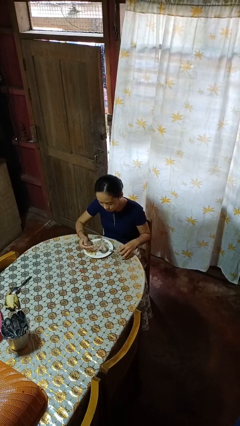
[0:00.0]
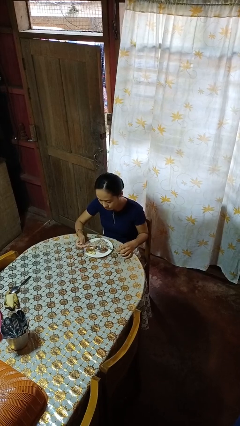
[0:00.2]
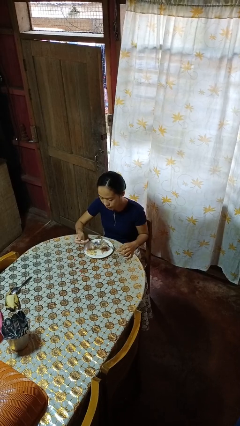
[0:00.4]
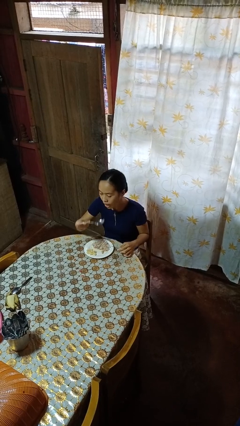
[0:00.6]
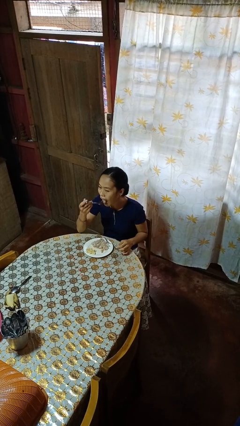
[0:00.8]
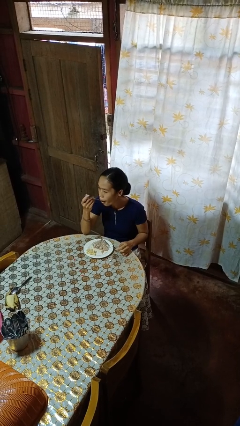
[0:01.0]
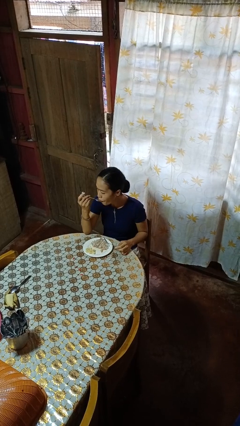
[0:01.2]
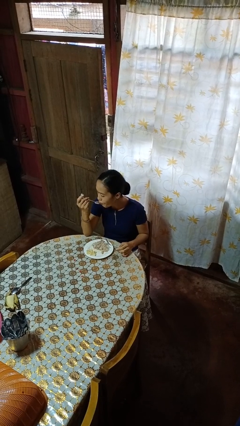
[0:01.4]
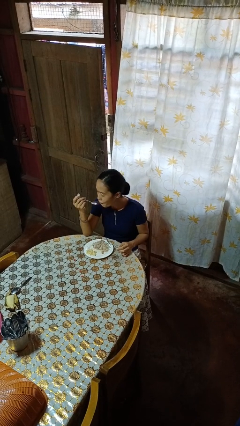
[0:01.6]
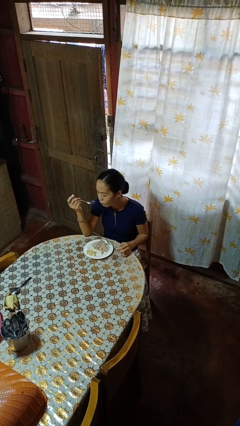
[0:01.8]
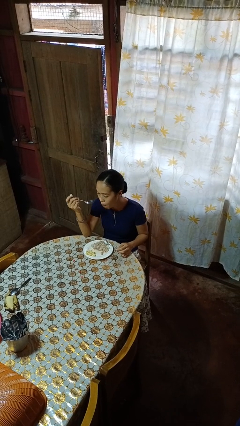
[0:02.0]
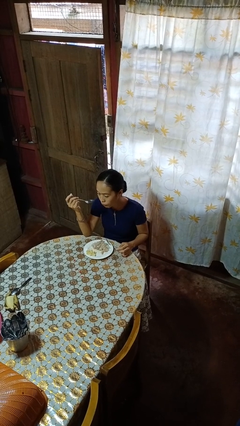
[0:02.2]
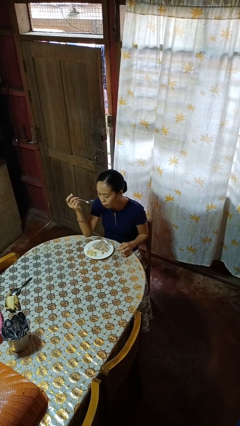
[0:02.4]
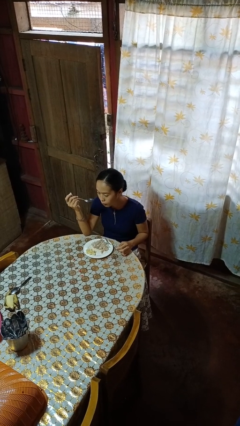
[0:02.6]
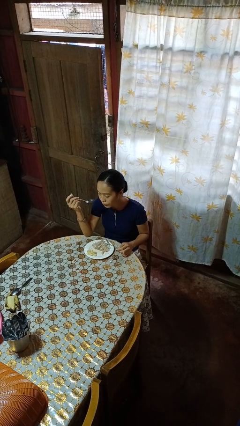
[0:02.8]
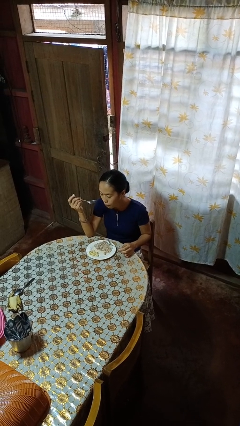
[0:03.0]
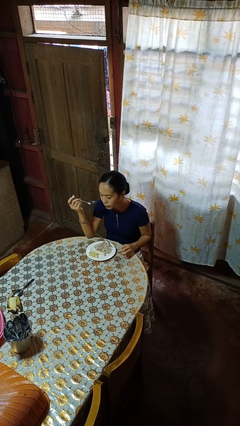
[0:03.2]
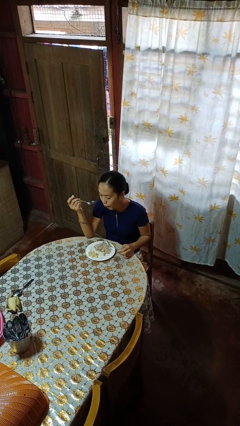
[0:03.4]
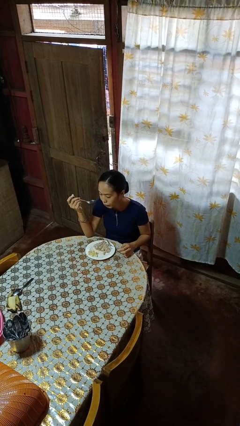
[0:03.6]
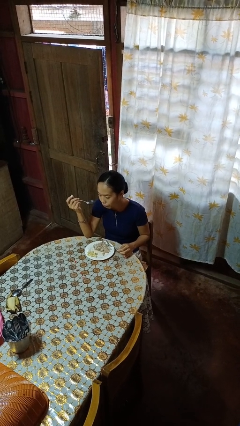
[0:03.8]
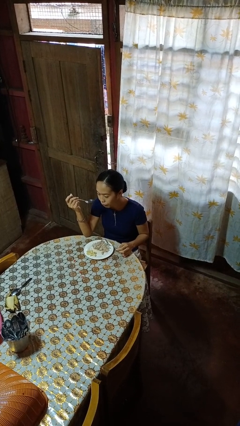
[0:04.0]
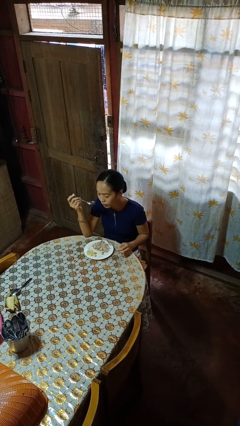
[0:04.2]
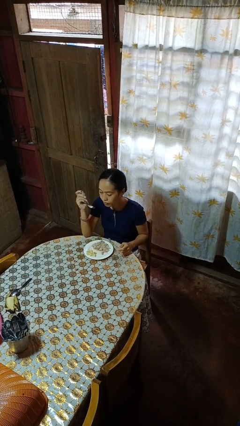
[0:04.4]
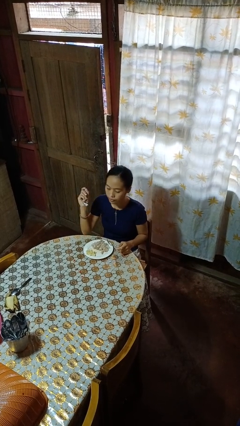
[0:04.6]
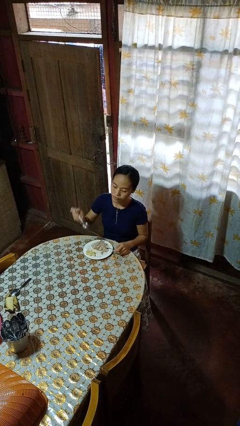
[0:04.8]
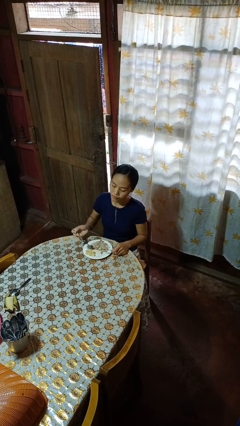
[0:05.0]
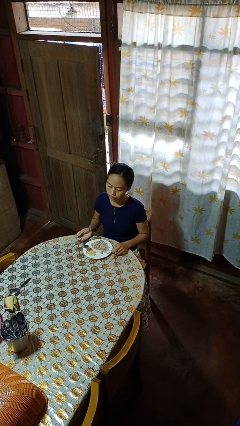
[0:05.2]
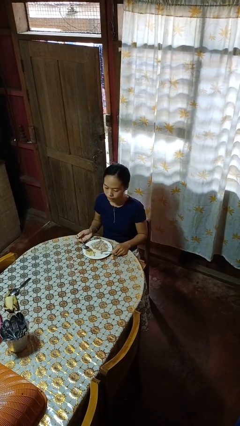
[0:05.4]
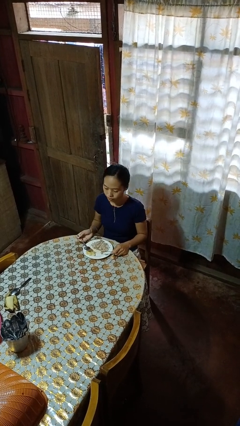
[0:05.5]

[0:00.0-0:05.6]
person eats with utensil

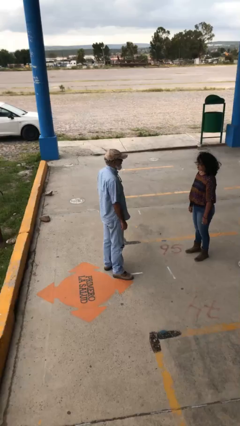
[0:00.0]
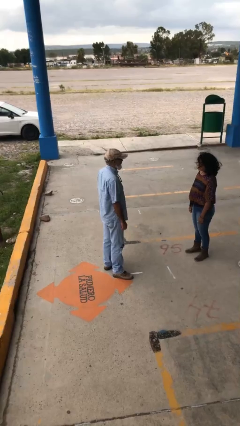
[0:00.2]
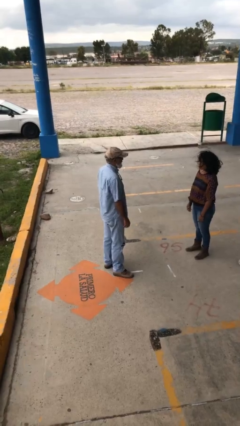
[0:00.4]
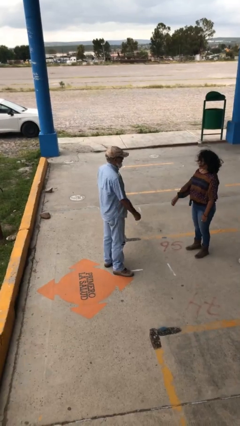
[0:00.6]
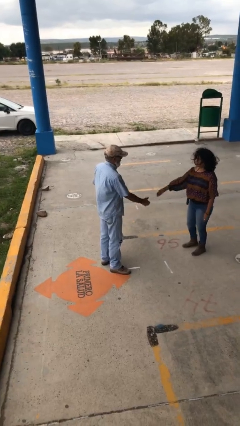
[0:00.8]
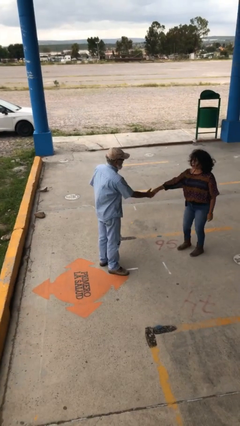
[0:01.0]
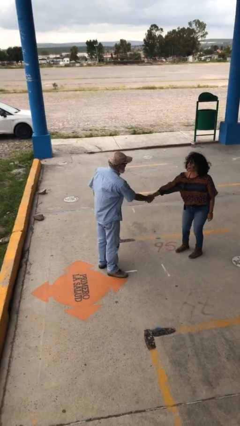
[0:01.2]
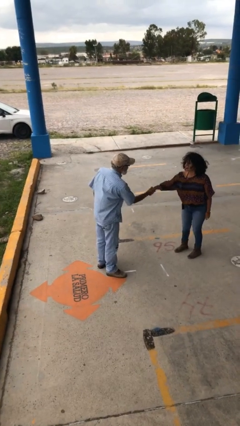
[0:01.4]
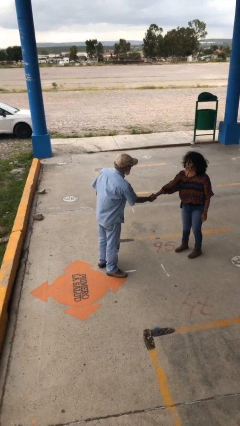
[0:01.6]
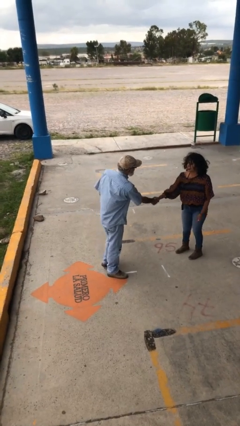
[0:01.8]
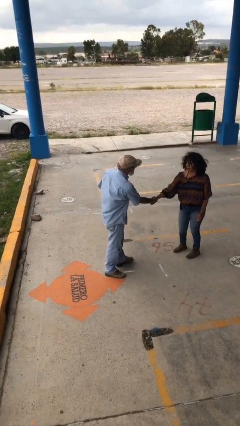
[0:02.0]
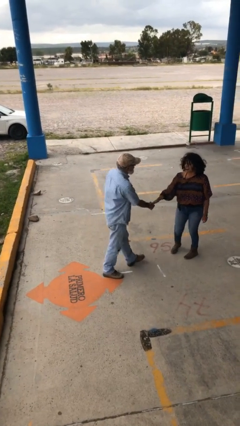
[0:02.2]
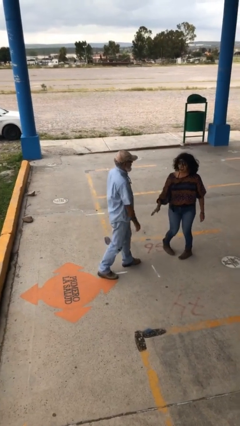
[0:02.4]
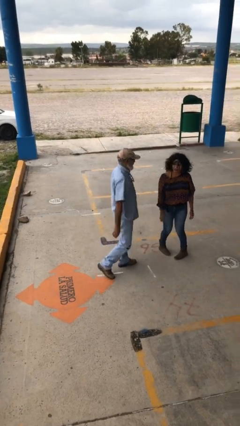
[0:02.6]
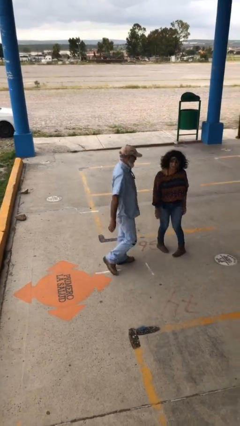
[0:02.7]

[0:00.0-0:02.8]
person shakes hand

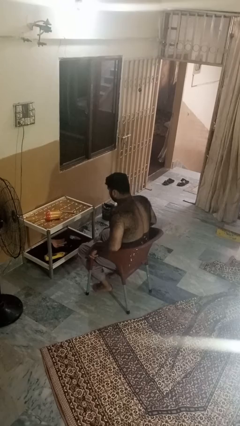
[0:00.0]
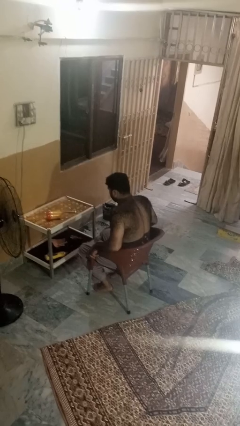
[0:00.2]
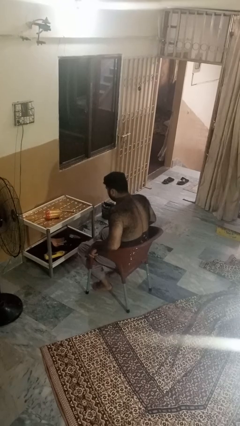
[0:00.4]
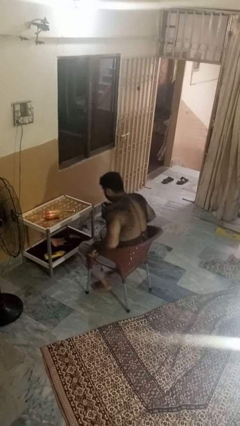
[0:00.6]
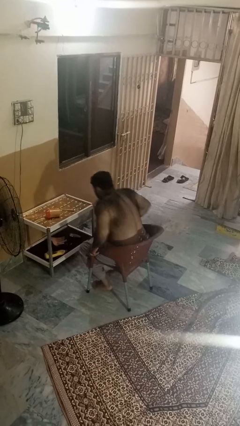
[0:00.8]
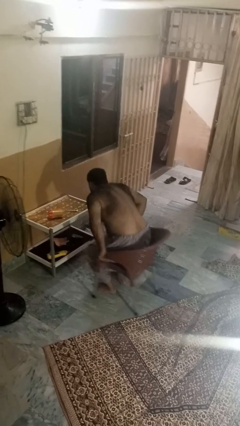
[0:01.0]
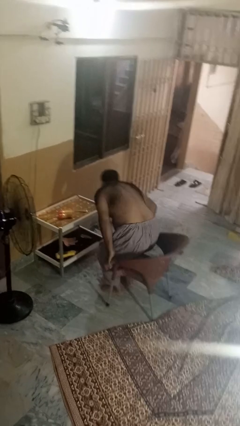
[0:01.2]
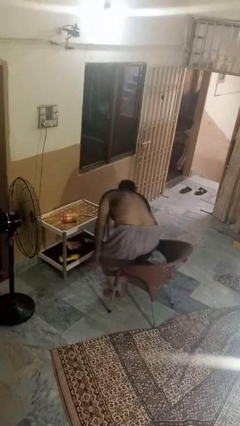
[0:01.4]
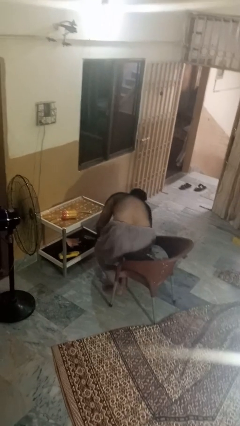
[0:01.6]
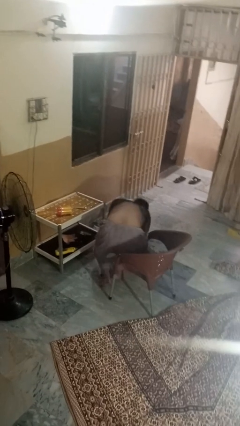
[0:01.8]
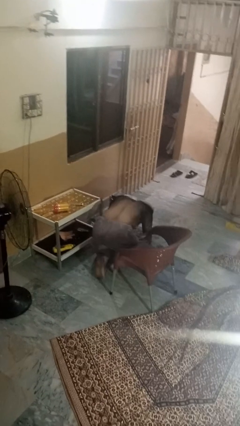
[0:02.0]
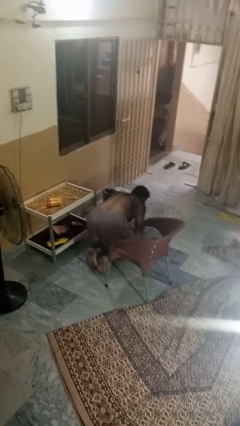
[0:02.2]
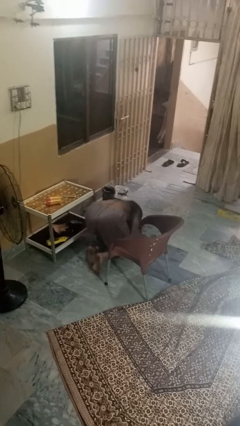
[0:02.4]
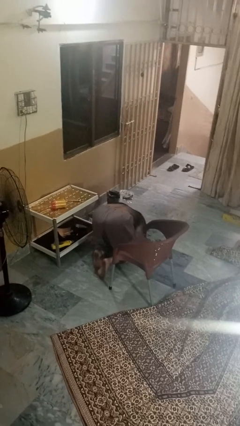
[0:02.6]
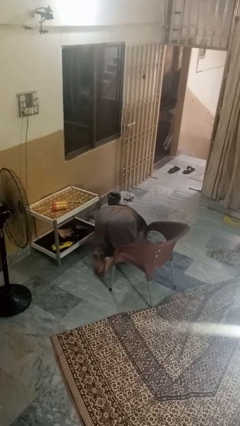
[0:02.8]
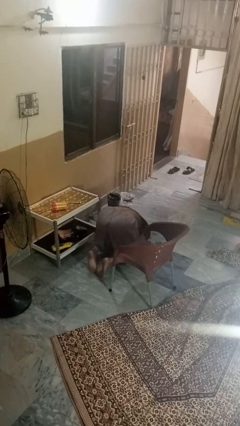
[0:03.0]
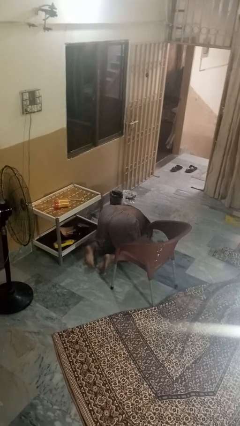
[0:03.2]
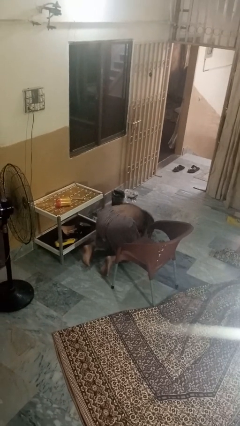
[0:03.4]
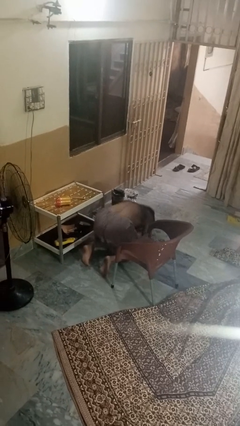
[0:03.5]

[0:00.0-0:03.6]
person falls from chair

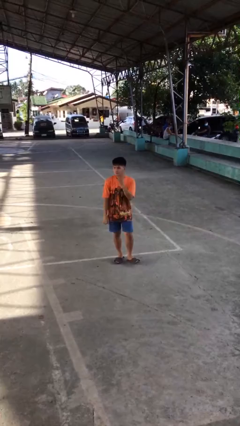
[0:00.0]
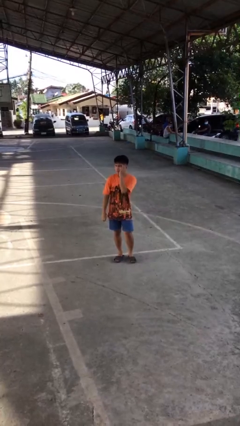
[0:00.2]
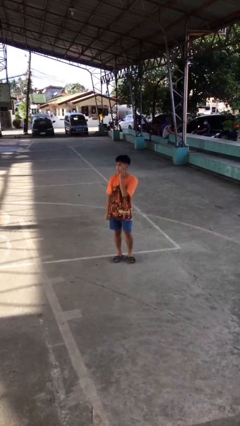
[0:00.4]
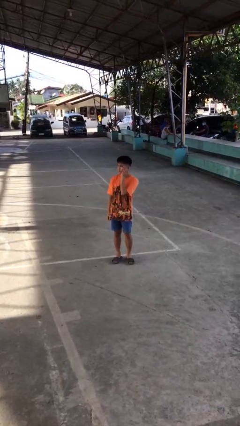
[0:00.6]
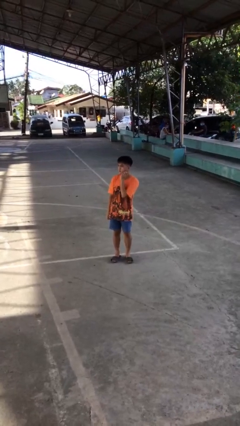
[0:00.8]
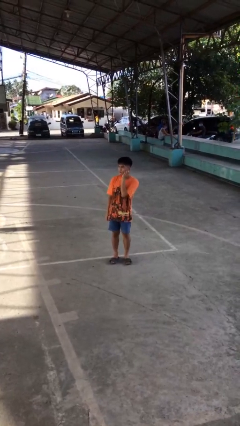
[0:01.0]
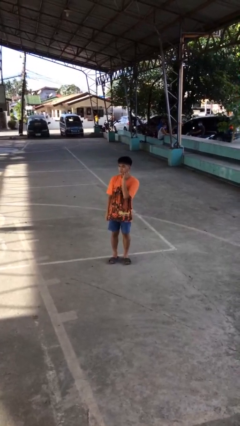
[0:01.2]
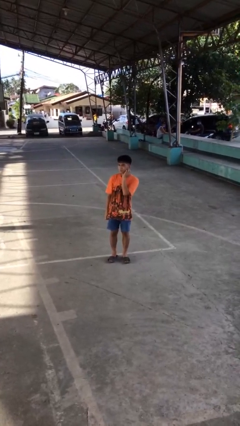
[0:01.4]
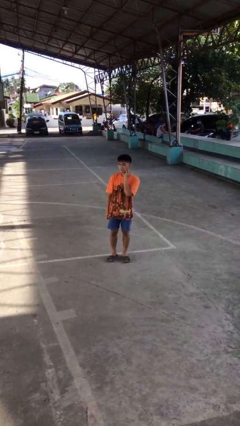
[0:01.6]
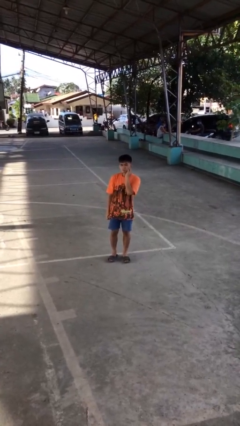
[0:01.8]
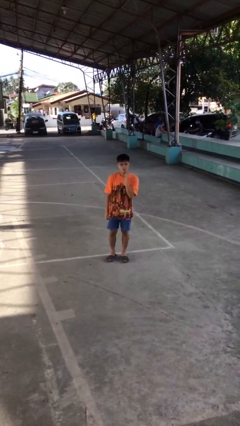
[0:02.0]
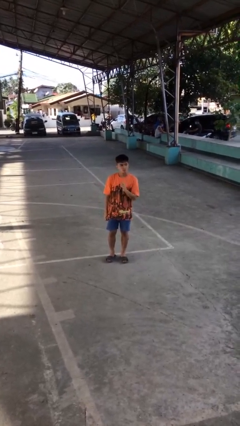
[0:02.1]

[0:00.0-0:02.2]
person scratches face

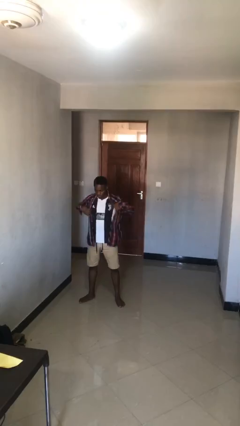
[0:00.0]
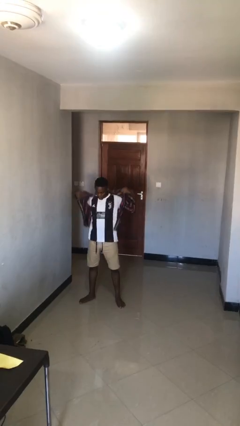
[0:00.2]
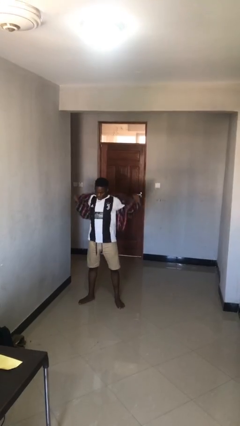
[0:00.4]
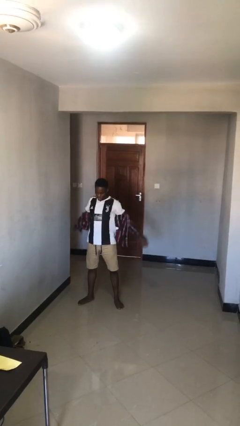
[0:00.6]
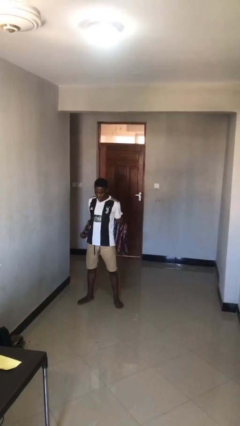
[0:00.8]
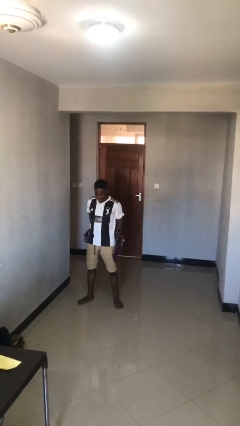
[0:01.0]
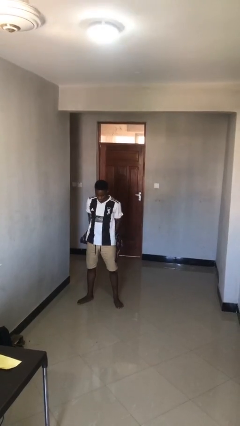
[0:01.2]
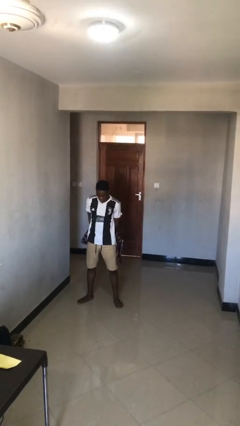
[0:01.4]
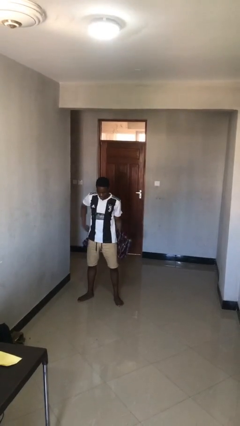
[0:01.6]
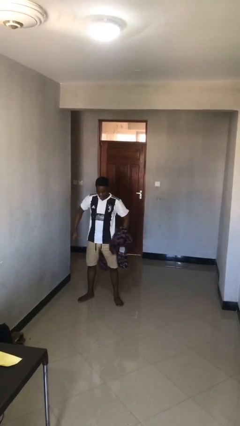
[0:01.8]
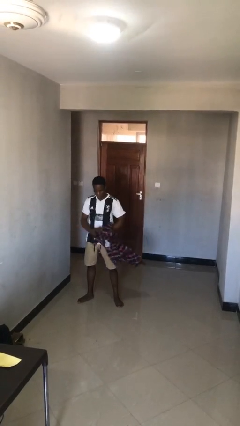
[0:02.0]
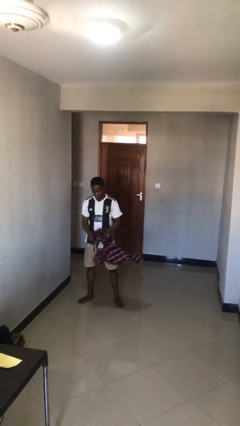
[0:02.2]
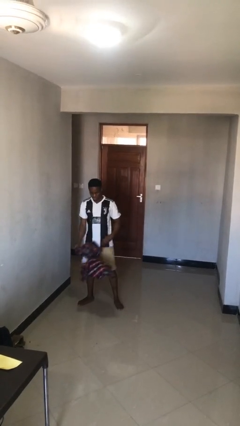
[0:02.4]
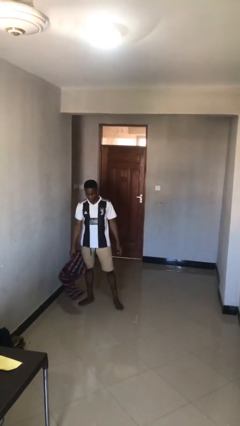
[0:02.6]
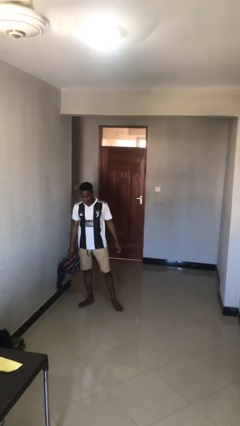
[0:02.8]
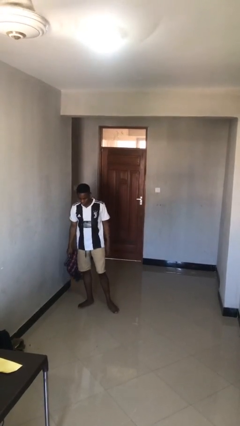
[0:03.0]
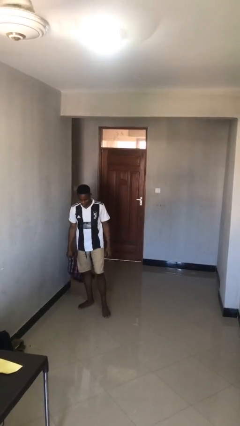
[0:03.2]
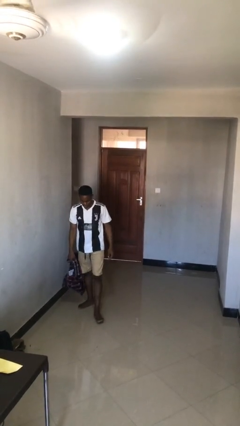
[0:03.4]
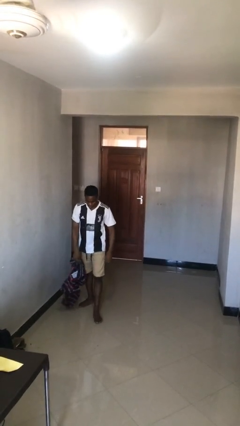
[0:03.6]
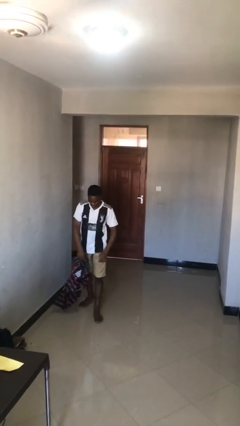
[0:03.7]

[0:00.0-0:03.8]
person takes off shirt
